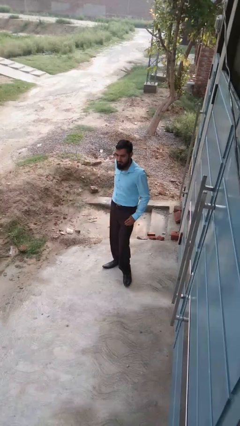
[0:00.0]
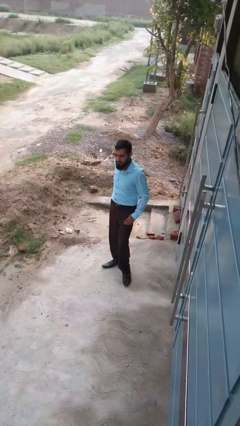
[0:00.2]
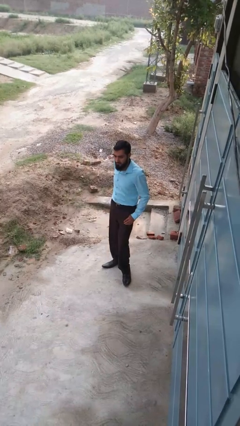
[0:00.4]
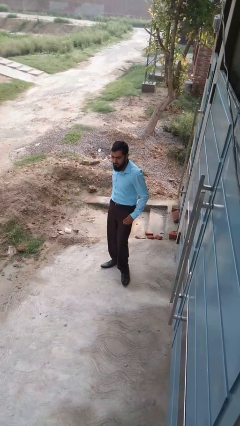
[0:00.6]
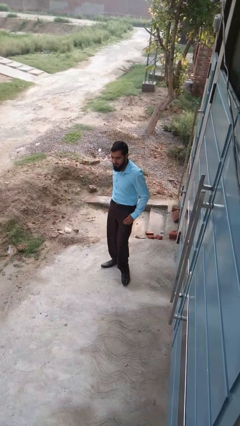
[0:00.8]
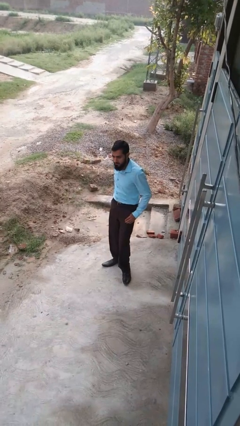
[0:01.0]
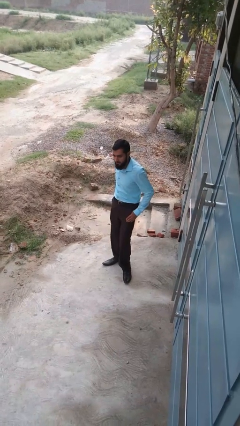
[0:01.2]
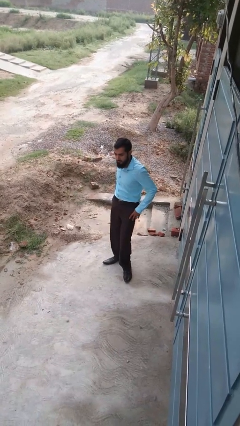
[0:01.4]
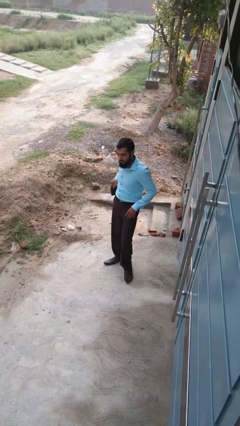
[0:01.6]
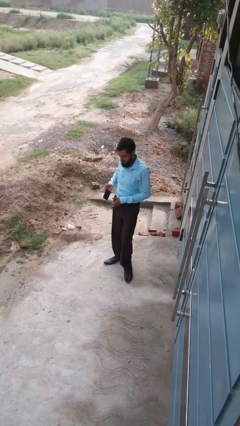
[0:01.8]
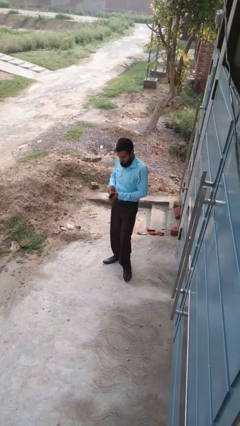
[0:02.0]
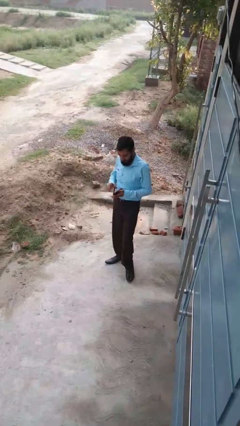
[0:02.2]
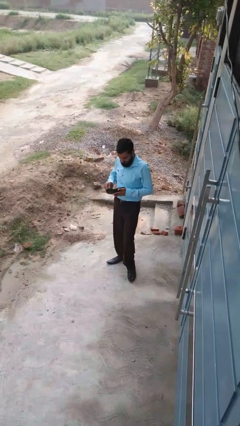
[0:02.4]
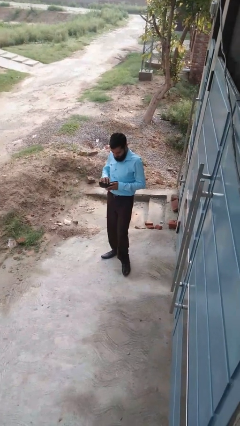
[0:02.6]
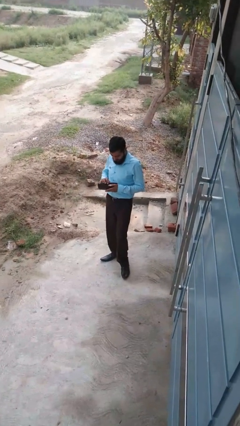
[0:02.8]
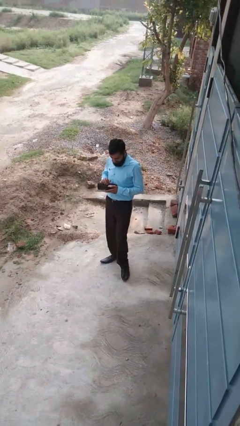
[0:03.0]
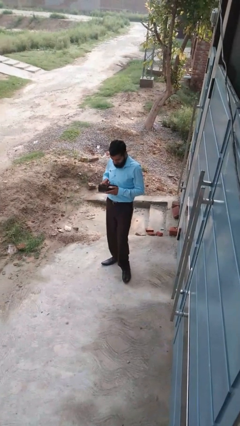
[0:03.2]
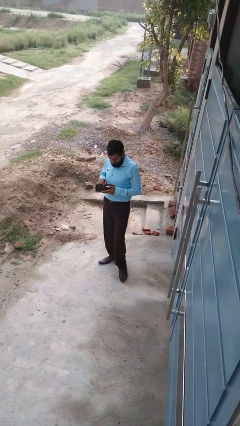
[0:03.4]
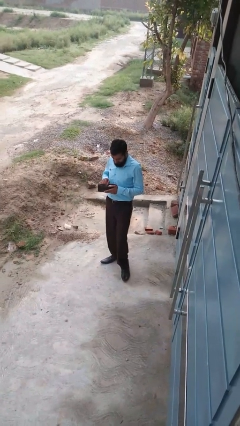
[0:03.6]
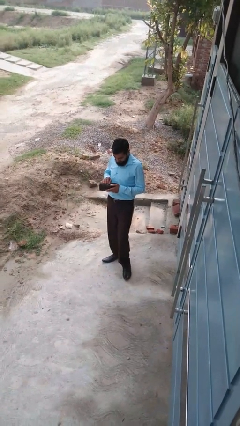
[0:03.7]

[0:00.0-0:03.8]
person searches in purse

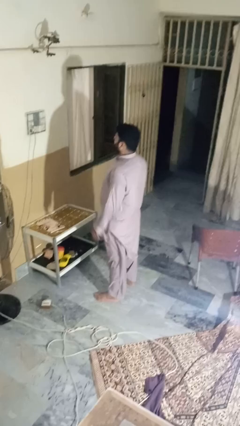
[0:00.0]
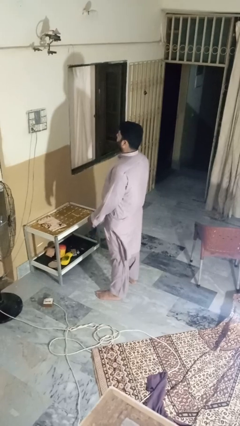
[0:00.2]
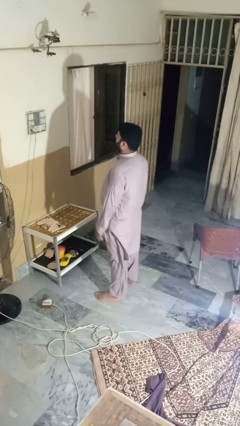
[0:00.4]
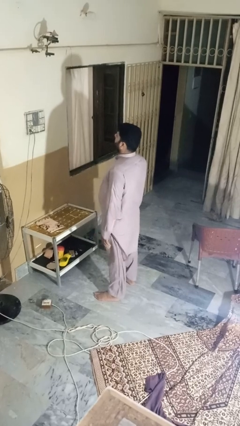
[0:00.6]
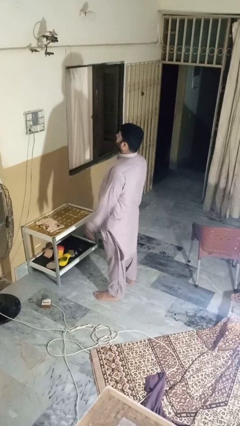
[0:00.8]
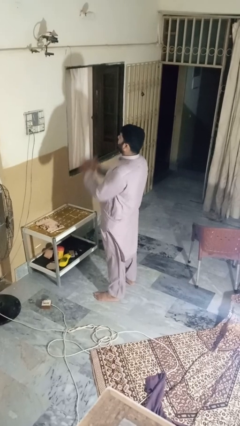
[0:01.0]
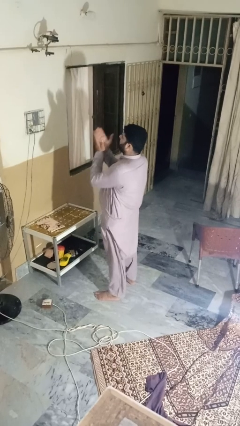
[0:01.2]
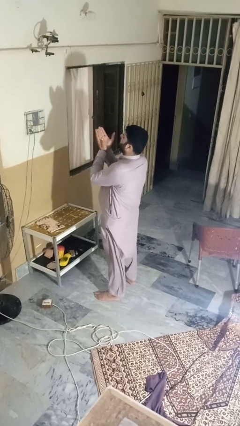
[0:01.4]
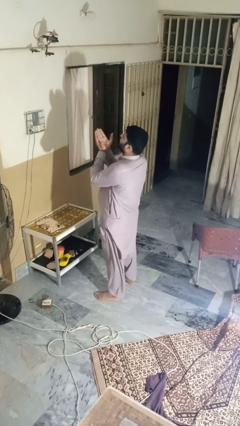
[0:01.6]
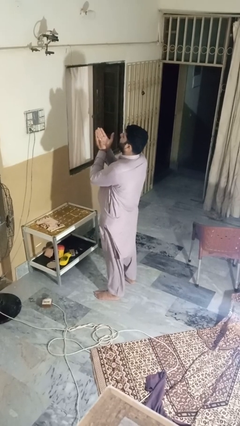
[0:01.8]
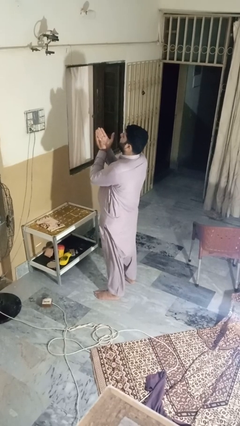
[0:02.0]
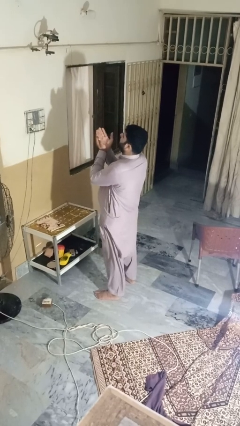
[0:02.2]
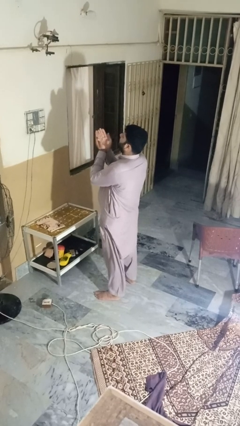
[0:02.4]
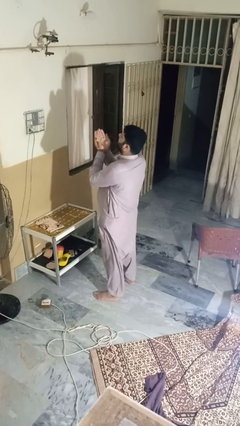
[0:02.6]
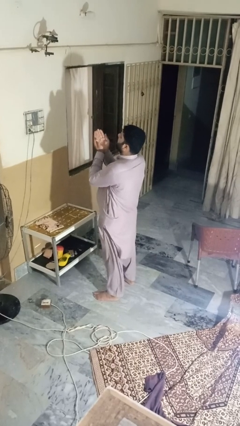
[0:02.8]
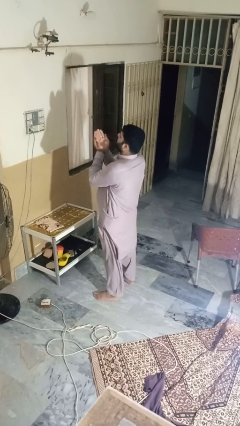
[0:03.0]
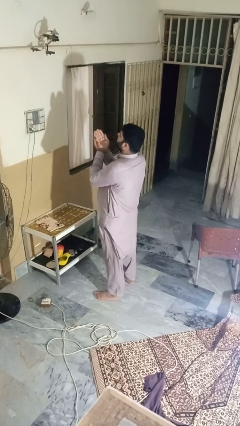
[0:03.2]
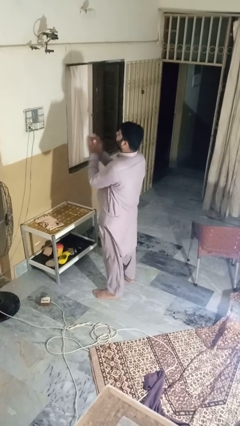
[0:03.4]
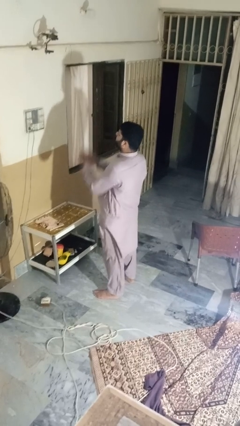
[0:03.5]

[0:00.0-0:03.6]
person prays

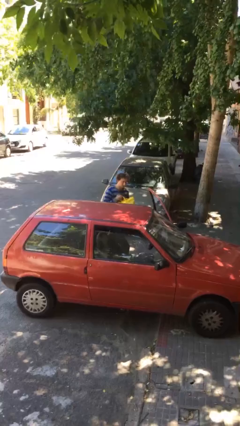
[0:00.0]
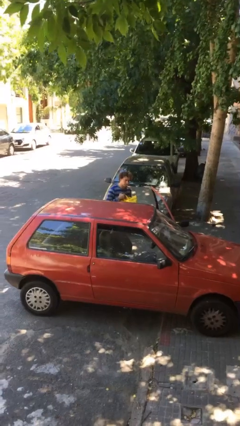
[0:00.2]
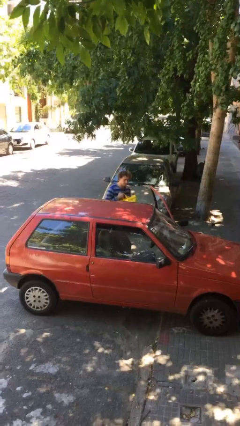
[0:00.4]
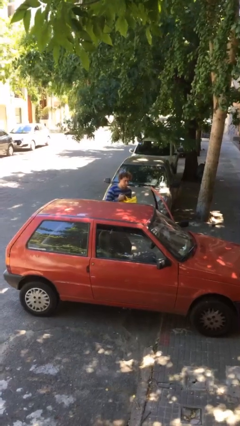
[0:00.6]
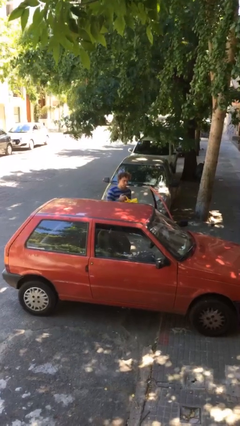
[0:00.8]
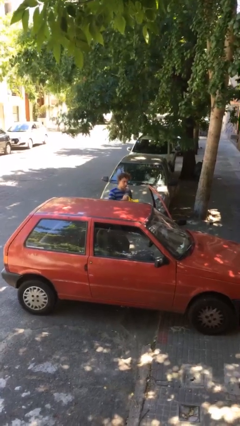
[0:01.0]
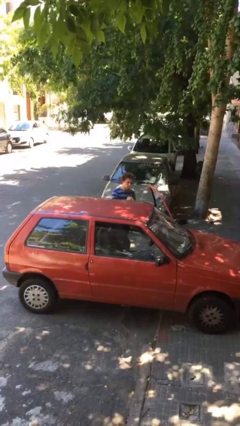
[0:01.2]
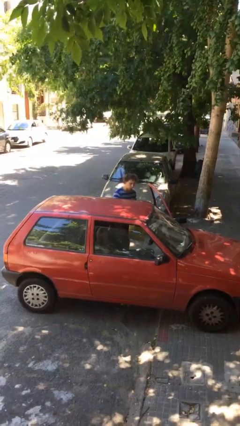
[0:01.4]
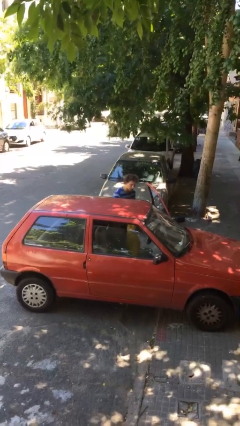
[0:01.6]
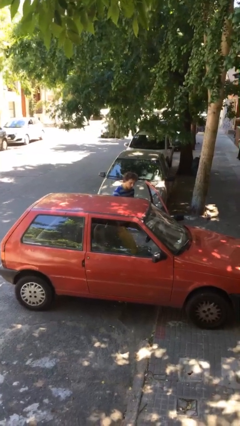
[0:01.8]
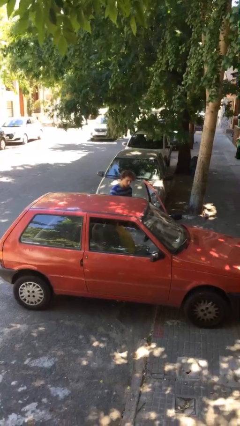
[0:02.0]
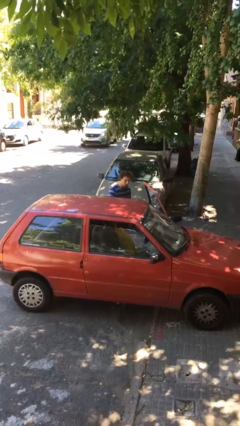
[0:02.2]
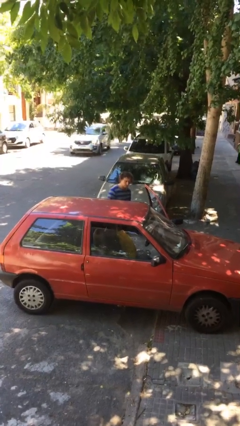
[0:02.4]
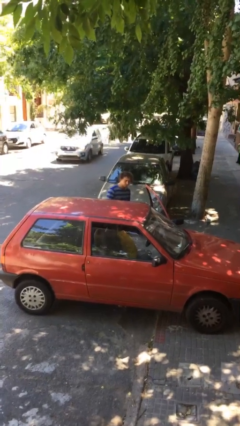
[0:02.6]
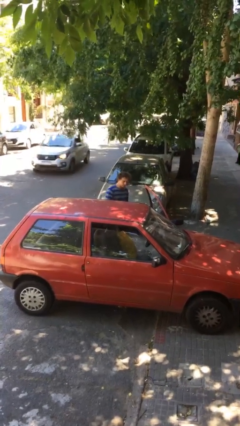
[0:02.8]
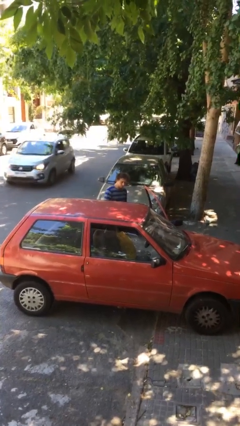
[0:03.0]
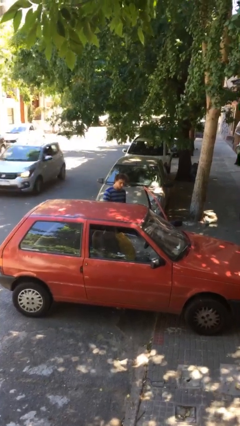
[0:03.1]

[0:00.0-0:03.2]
person loads car

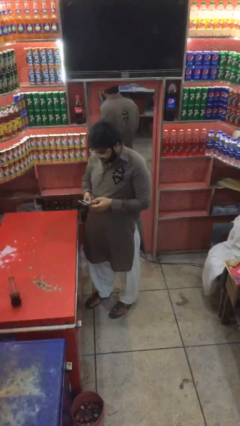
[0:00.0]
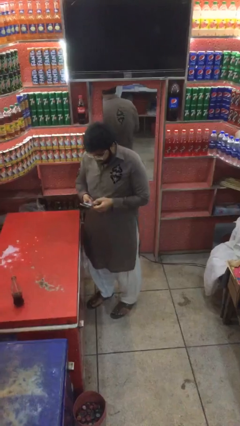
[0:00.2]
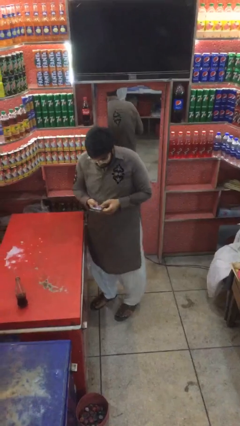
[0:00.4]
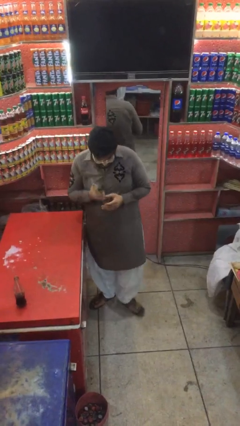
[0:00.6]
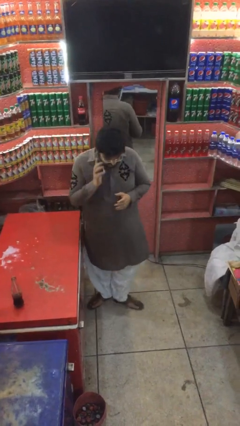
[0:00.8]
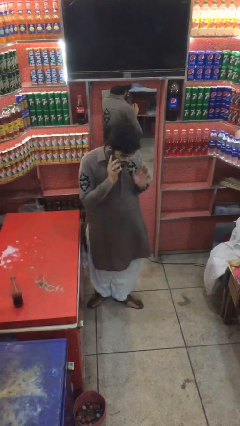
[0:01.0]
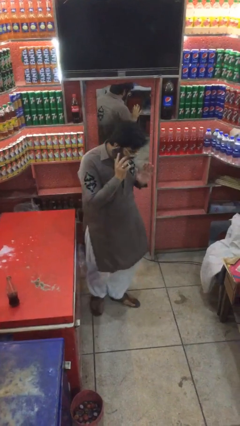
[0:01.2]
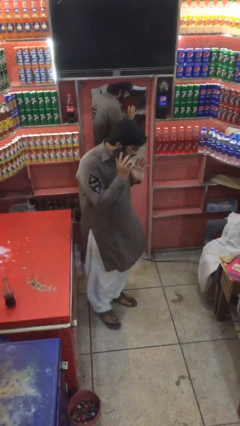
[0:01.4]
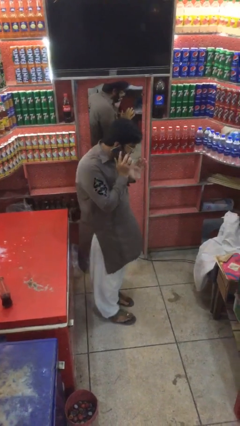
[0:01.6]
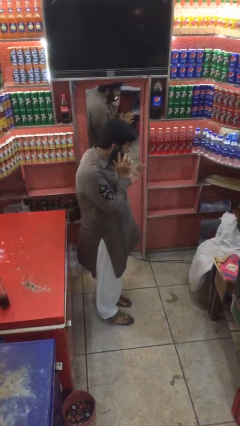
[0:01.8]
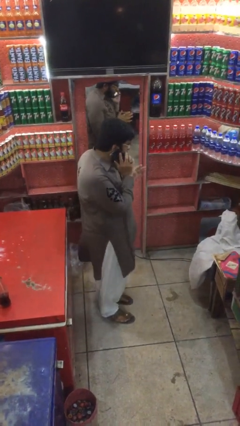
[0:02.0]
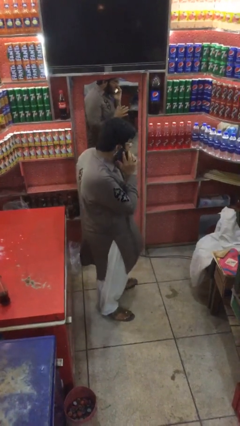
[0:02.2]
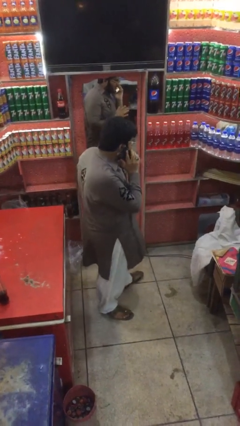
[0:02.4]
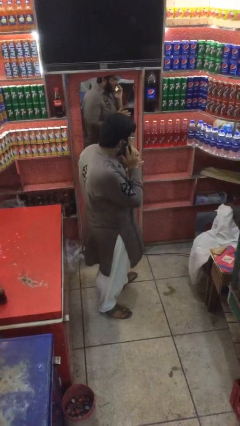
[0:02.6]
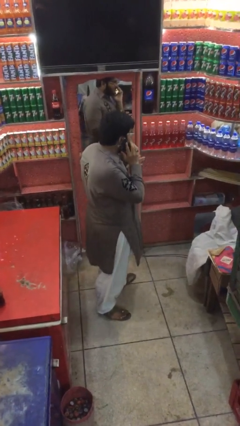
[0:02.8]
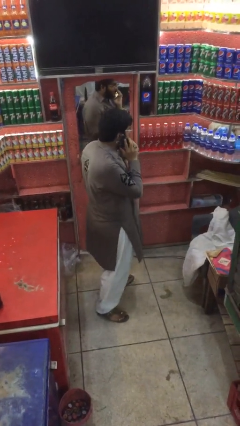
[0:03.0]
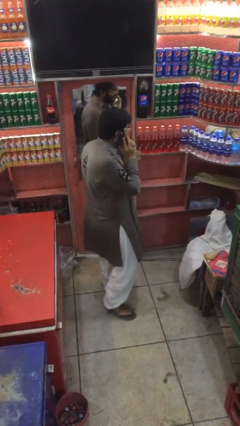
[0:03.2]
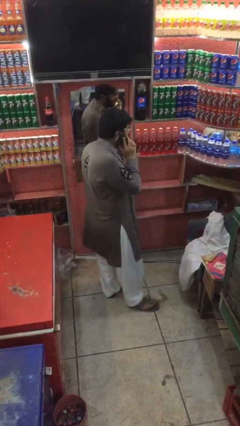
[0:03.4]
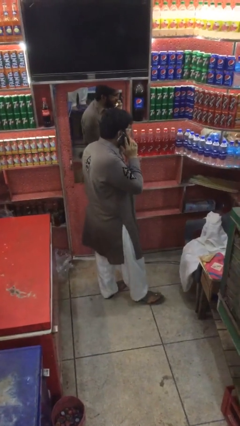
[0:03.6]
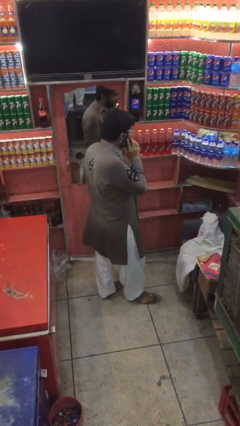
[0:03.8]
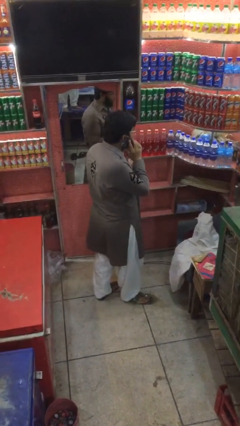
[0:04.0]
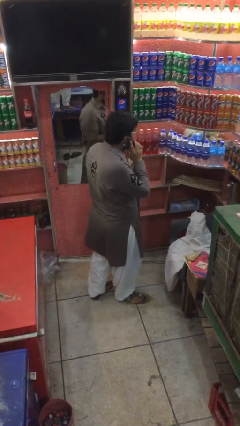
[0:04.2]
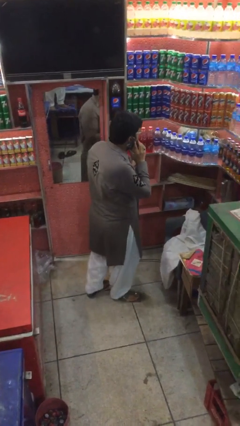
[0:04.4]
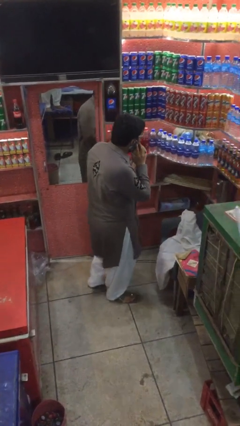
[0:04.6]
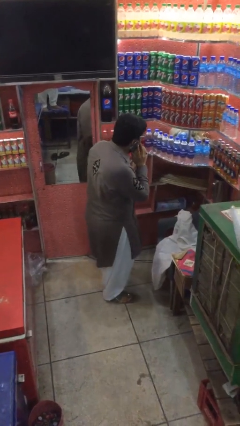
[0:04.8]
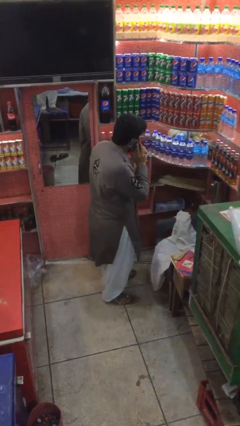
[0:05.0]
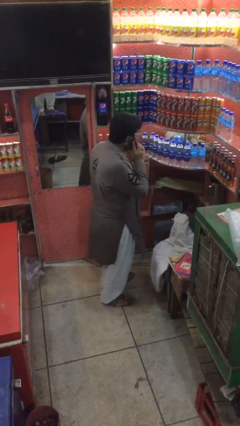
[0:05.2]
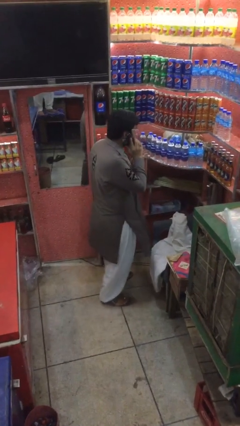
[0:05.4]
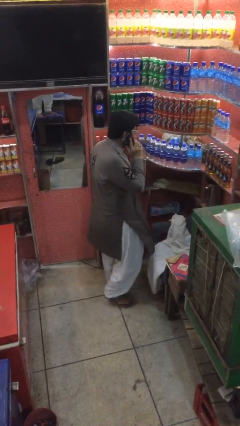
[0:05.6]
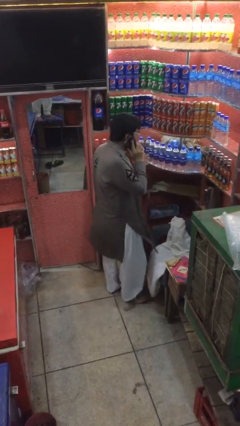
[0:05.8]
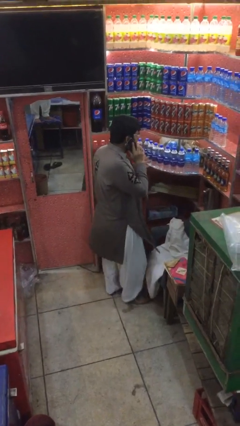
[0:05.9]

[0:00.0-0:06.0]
person talks on phone

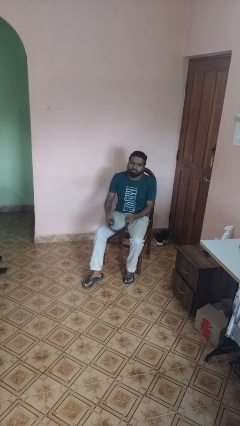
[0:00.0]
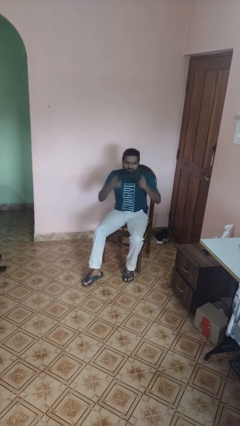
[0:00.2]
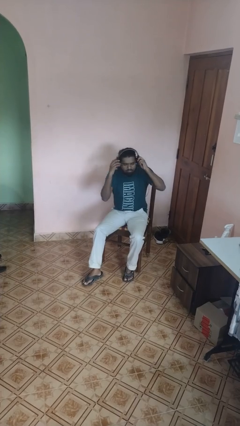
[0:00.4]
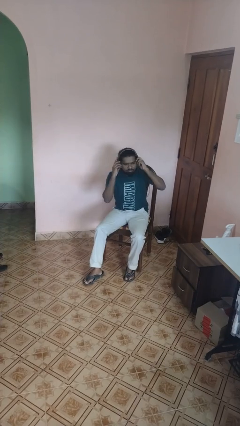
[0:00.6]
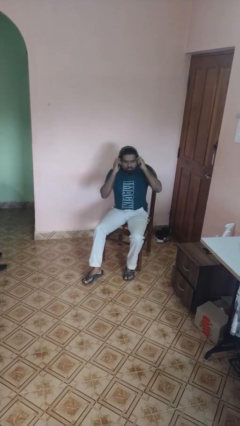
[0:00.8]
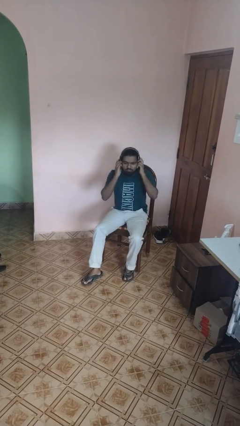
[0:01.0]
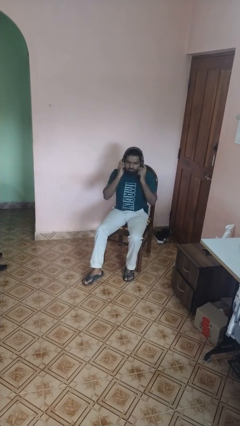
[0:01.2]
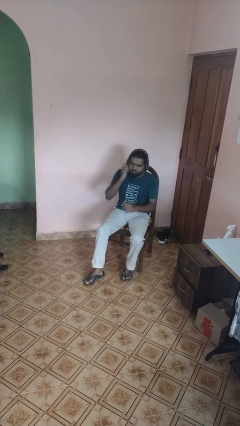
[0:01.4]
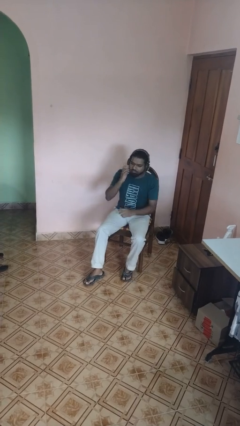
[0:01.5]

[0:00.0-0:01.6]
person puts on headphones
